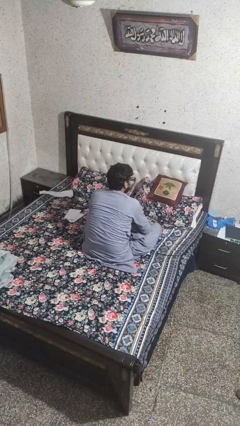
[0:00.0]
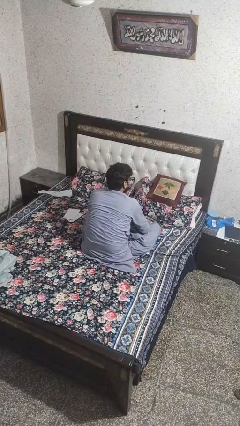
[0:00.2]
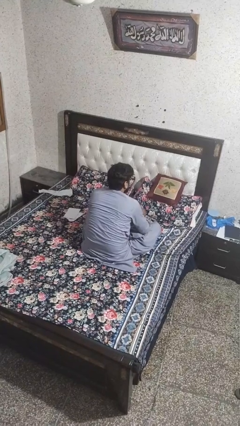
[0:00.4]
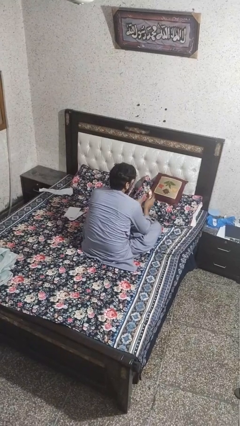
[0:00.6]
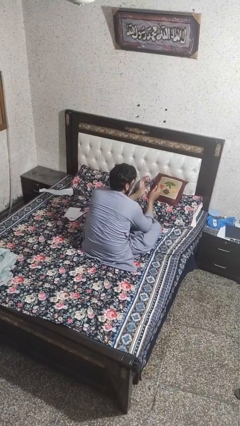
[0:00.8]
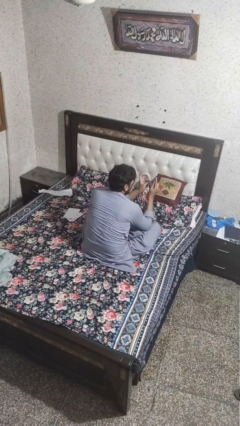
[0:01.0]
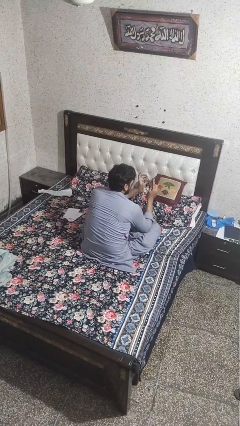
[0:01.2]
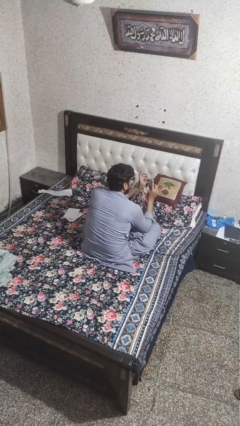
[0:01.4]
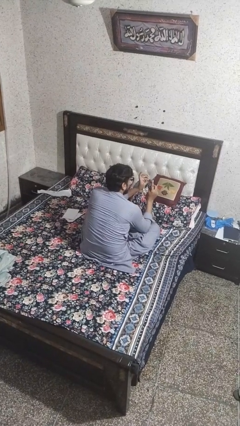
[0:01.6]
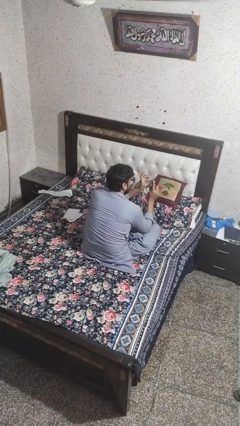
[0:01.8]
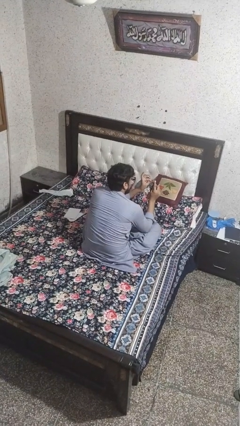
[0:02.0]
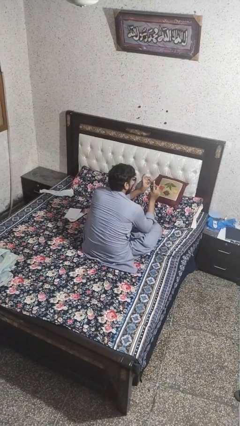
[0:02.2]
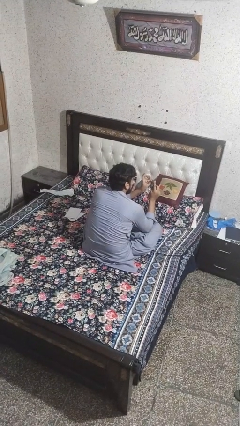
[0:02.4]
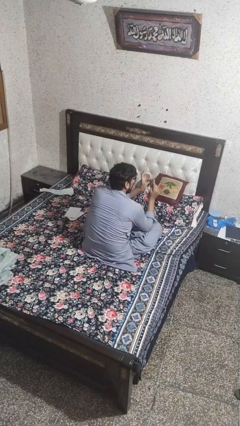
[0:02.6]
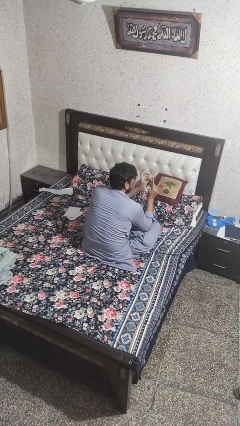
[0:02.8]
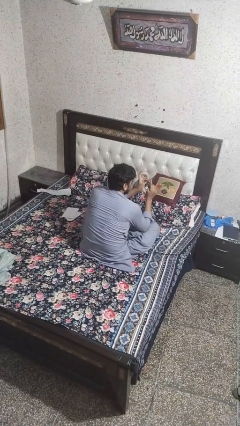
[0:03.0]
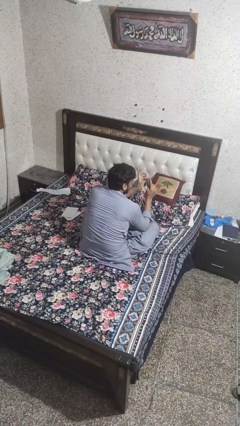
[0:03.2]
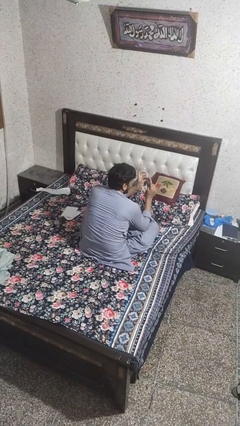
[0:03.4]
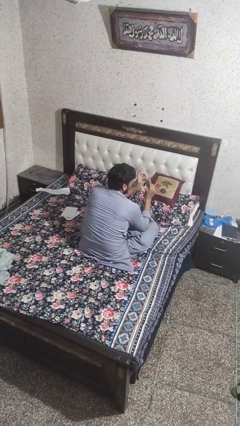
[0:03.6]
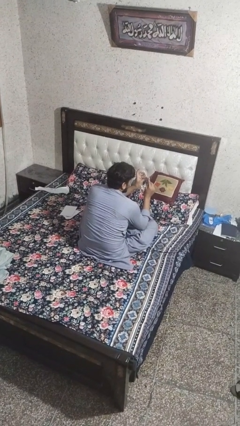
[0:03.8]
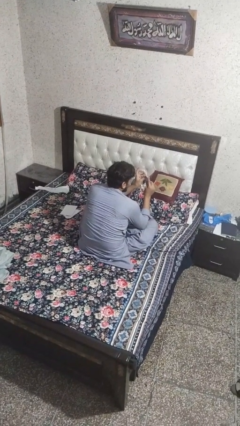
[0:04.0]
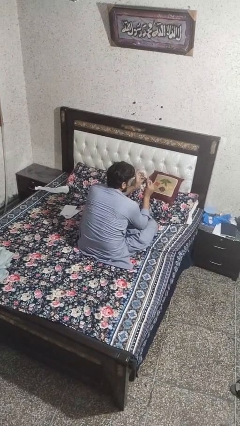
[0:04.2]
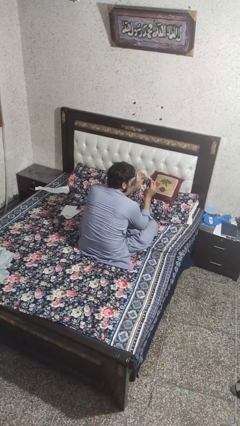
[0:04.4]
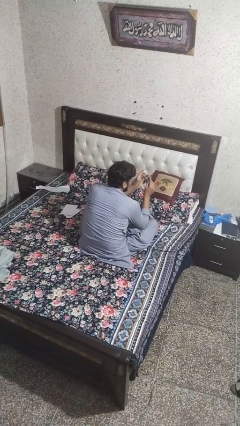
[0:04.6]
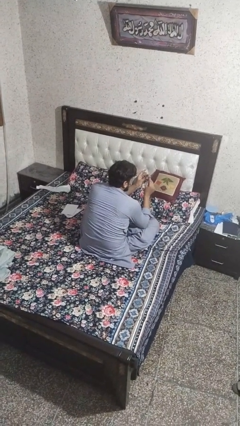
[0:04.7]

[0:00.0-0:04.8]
person files fingernails

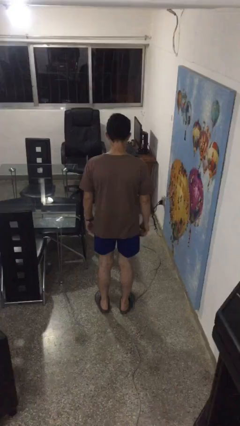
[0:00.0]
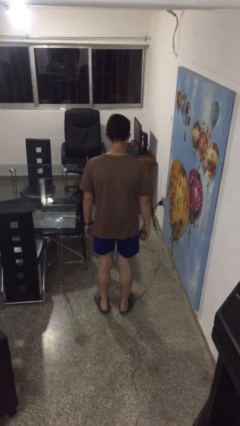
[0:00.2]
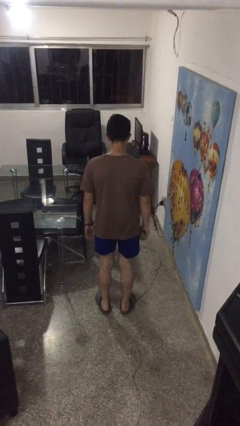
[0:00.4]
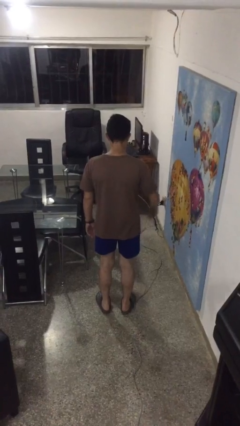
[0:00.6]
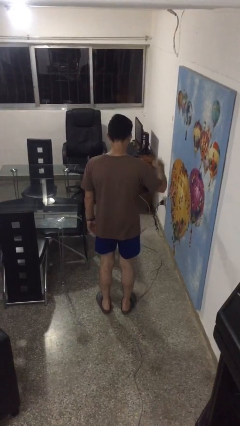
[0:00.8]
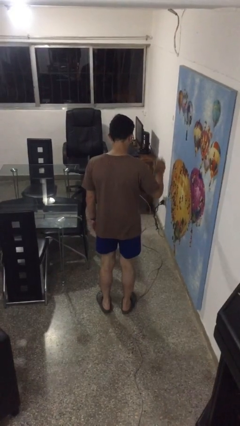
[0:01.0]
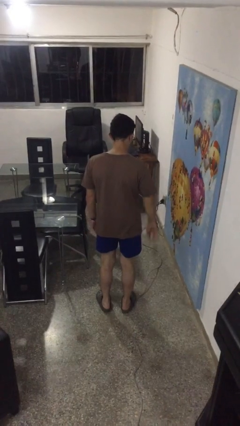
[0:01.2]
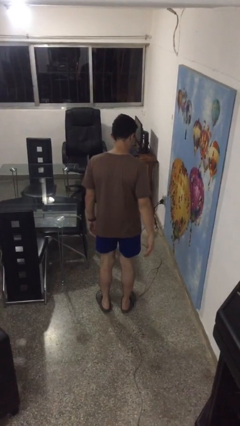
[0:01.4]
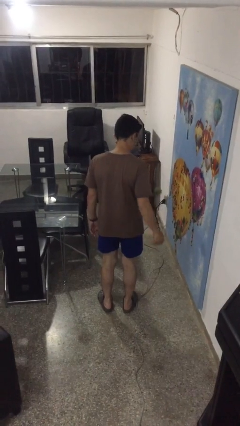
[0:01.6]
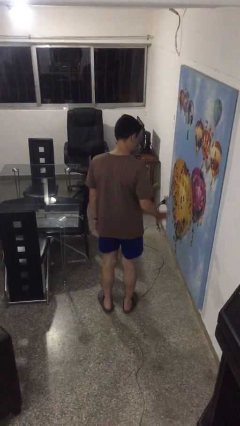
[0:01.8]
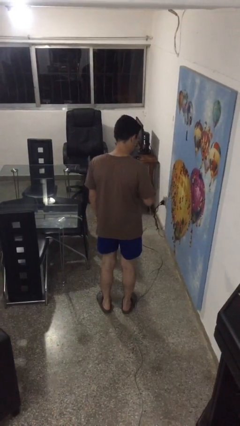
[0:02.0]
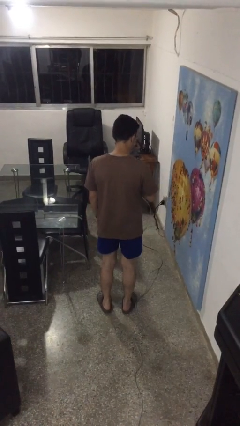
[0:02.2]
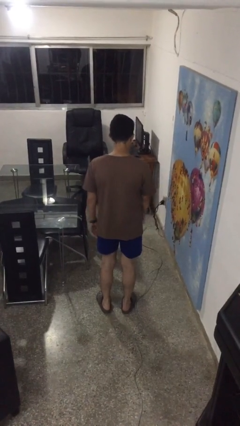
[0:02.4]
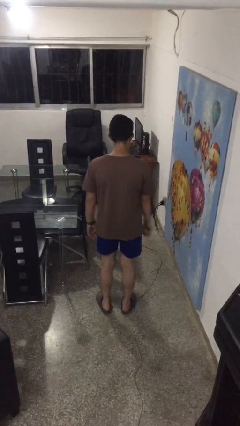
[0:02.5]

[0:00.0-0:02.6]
person bounces ball on floor

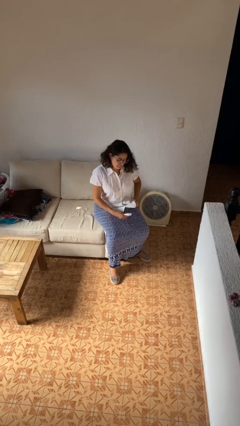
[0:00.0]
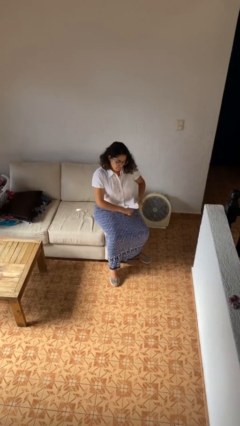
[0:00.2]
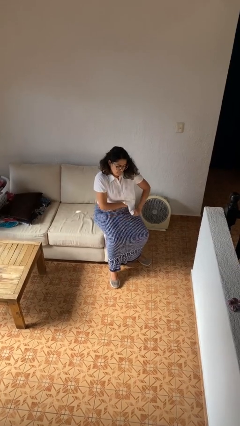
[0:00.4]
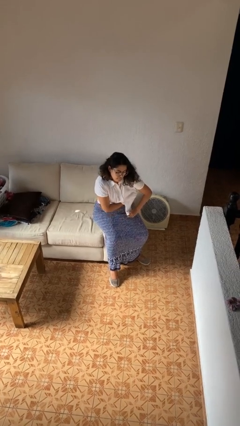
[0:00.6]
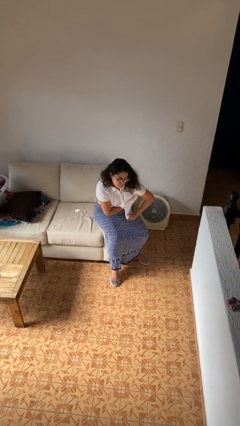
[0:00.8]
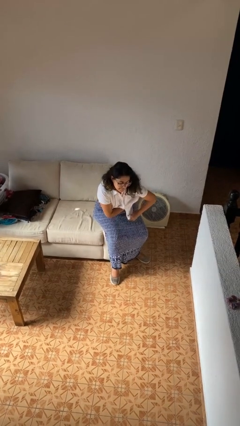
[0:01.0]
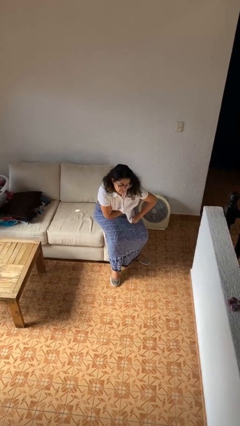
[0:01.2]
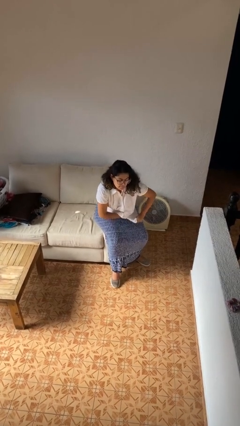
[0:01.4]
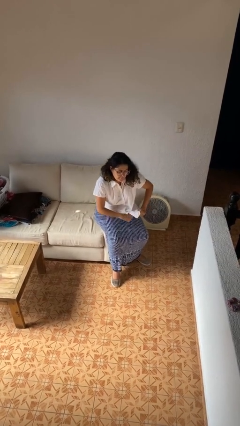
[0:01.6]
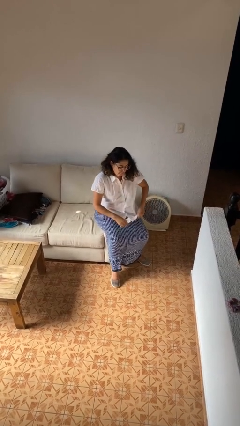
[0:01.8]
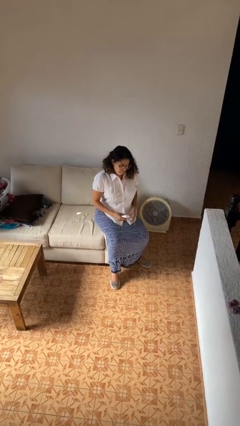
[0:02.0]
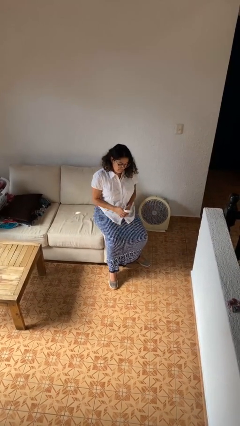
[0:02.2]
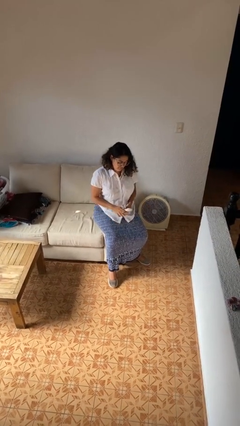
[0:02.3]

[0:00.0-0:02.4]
person applies deodorant

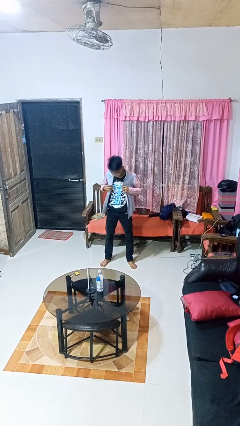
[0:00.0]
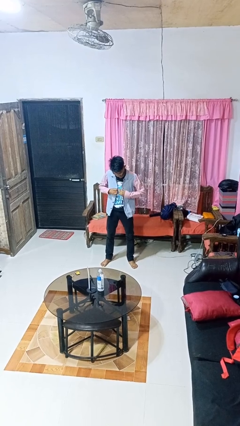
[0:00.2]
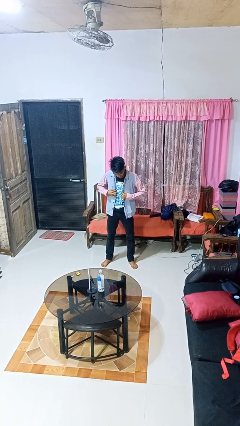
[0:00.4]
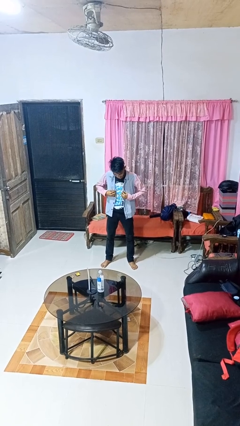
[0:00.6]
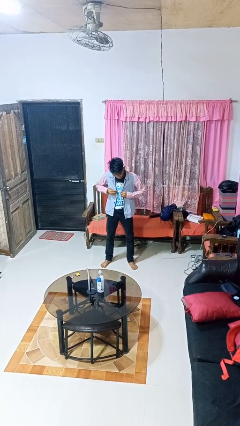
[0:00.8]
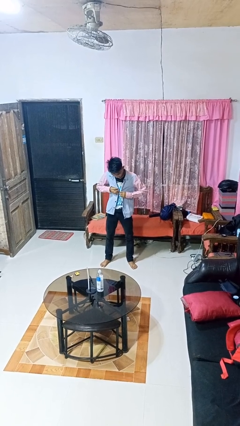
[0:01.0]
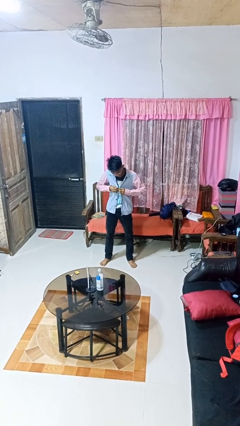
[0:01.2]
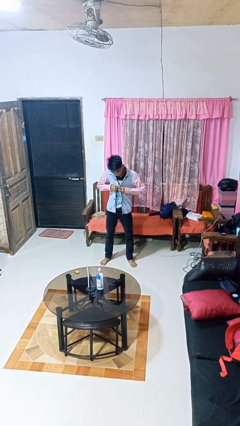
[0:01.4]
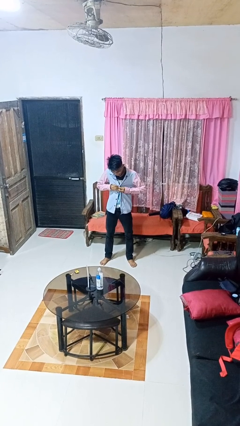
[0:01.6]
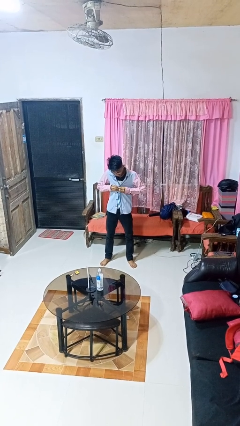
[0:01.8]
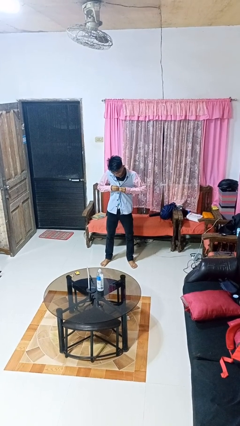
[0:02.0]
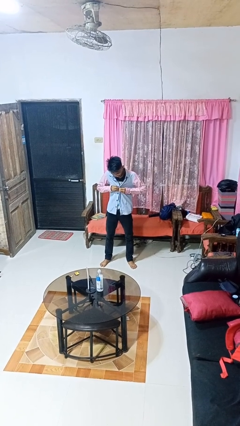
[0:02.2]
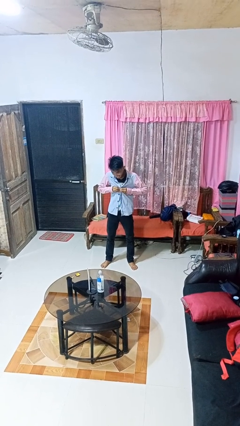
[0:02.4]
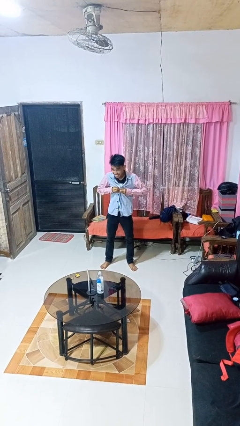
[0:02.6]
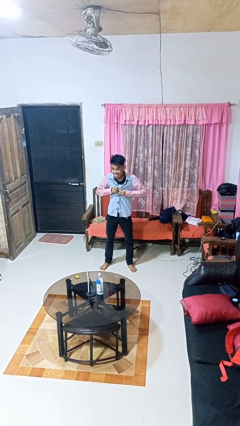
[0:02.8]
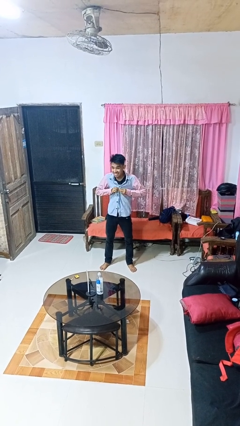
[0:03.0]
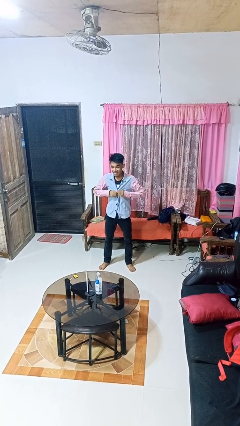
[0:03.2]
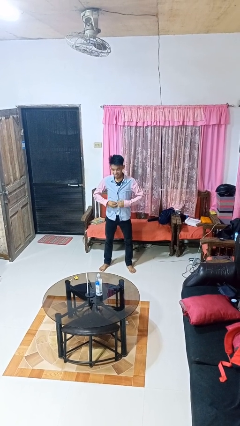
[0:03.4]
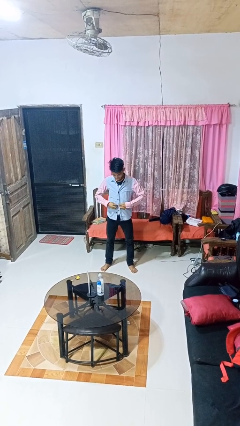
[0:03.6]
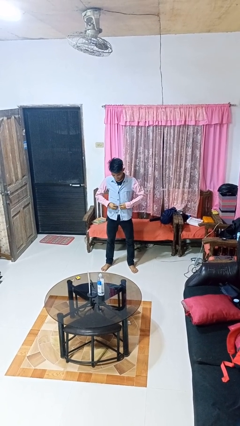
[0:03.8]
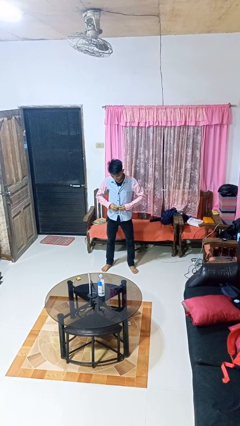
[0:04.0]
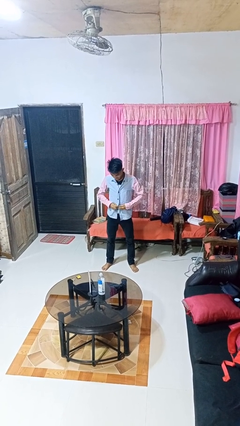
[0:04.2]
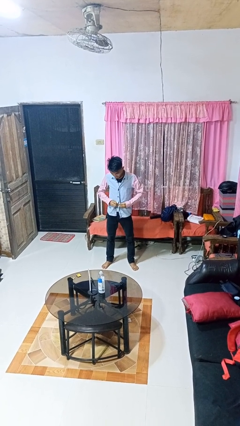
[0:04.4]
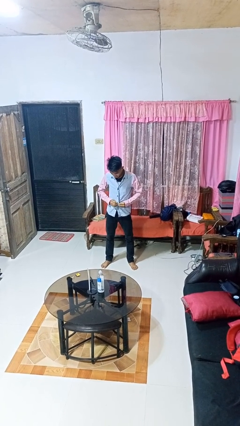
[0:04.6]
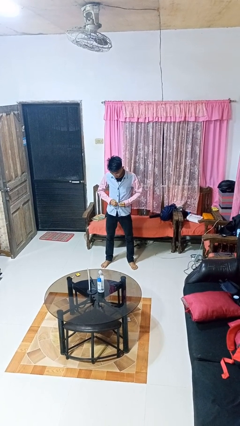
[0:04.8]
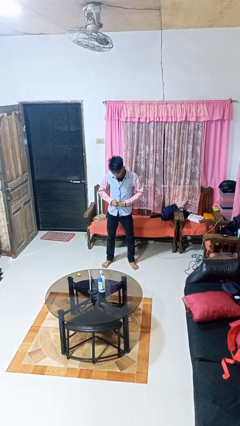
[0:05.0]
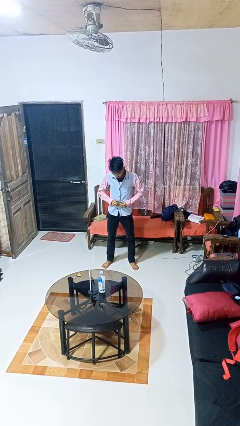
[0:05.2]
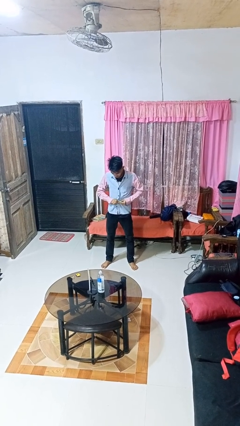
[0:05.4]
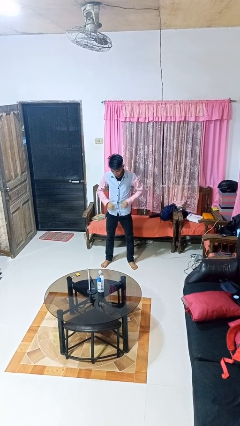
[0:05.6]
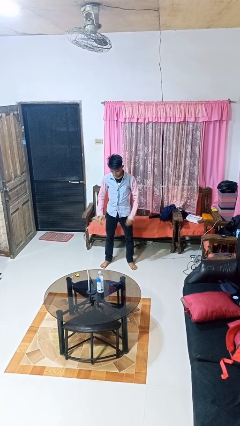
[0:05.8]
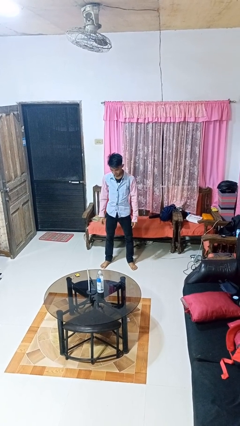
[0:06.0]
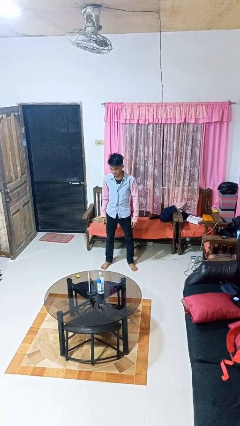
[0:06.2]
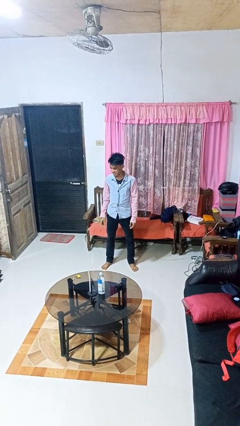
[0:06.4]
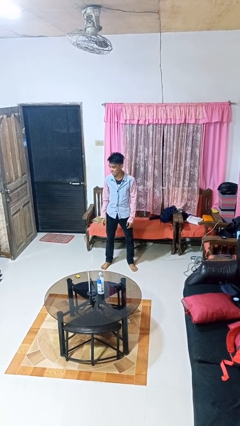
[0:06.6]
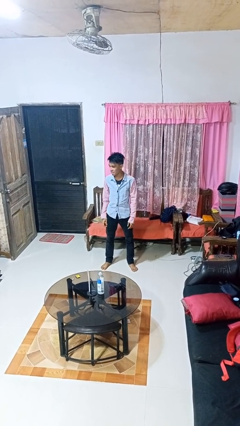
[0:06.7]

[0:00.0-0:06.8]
person buttons shirt

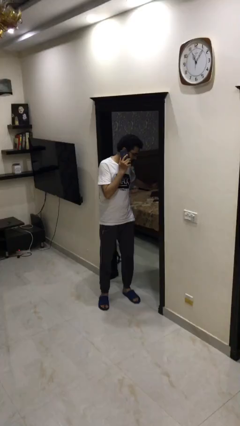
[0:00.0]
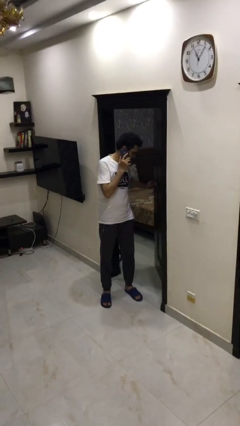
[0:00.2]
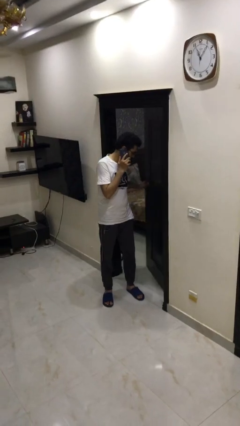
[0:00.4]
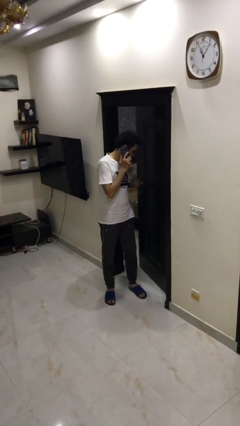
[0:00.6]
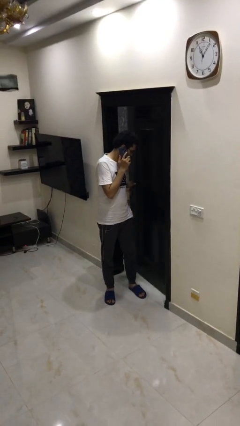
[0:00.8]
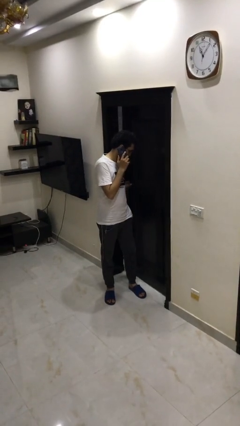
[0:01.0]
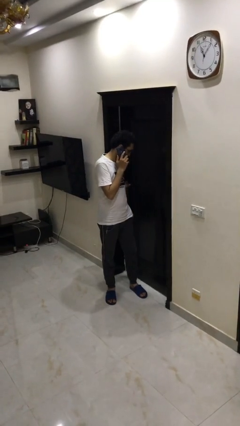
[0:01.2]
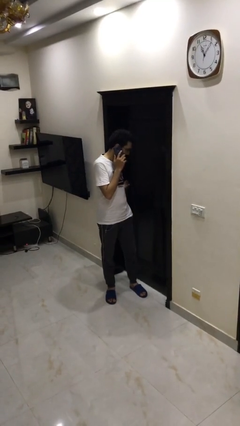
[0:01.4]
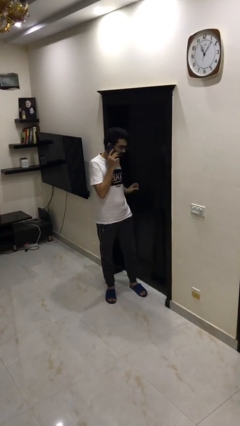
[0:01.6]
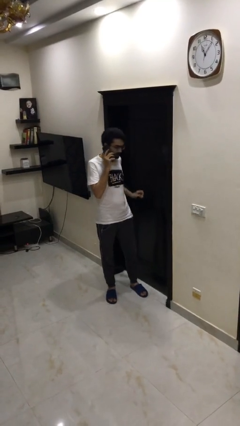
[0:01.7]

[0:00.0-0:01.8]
person closes facility door
